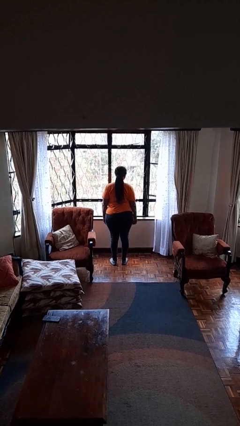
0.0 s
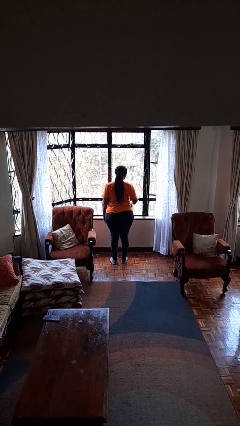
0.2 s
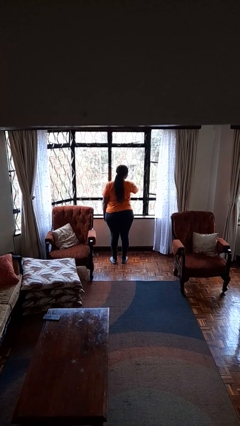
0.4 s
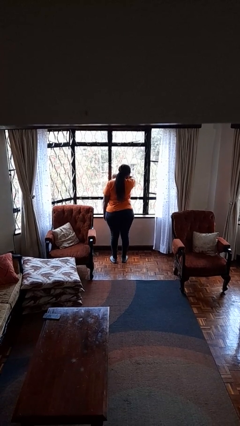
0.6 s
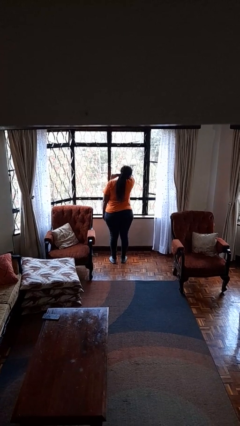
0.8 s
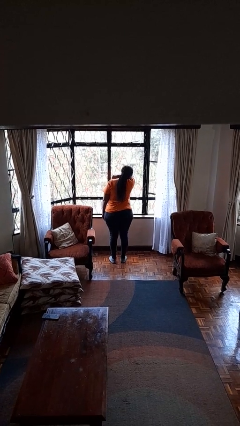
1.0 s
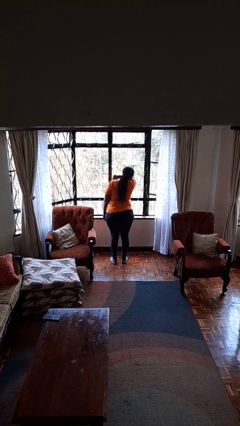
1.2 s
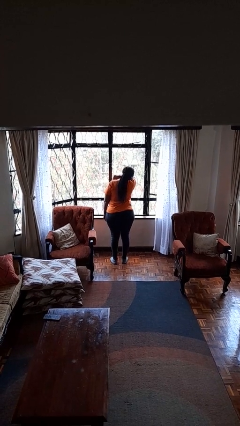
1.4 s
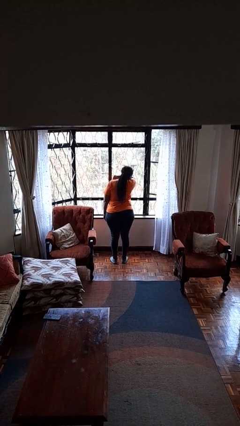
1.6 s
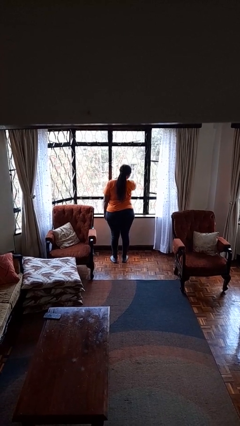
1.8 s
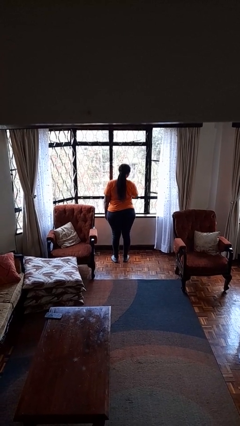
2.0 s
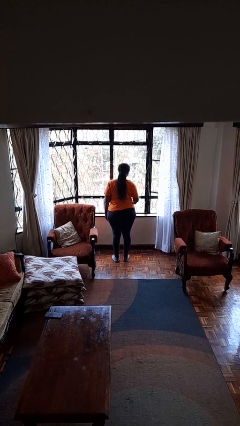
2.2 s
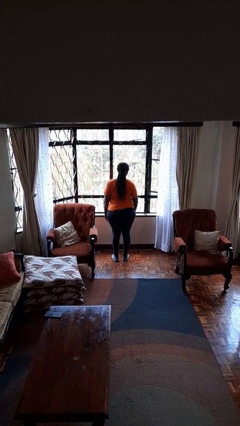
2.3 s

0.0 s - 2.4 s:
person sneezes into arm

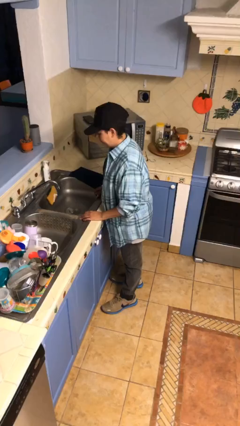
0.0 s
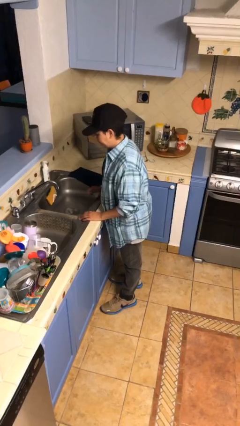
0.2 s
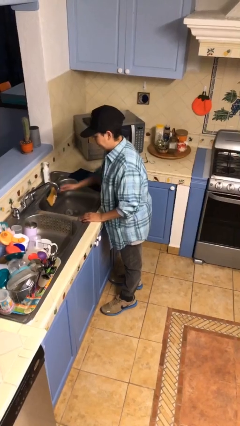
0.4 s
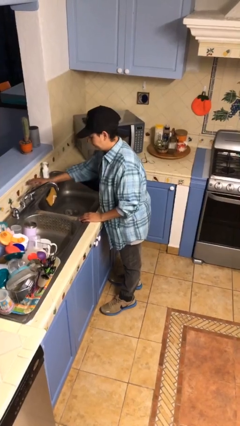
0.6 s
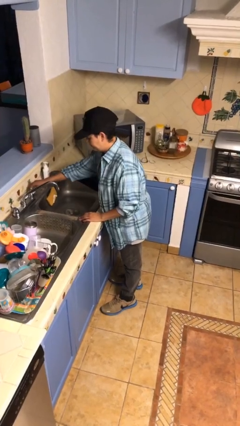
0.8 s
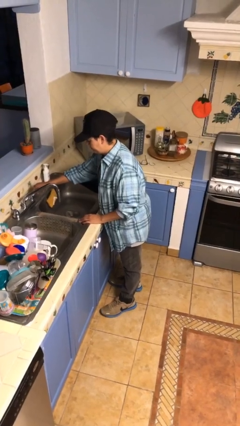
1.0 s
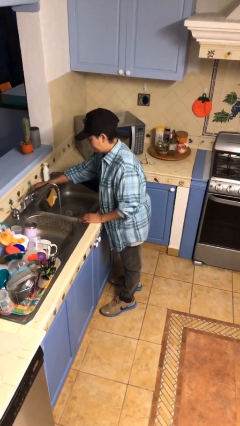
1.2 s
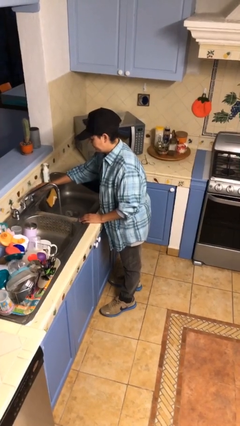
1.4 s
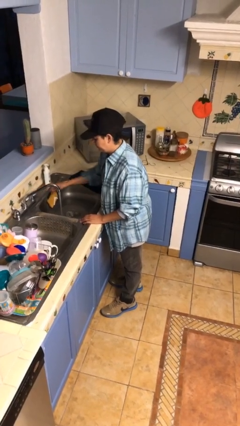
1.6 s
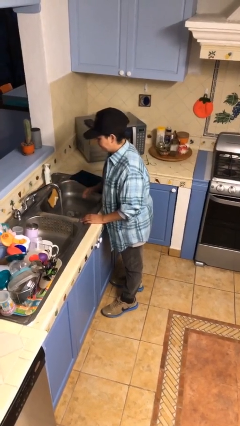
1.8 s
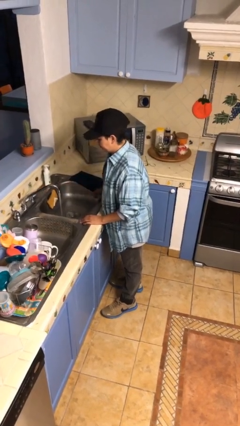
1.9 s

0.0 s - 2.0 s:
person turns on faucet

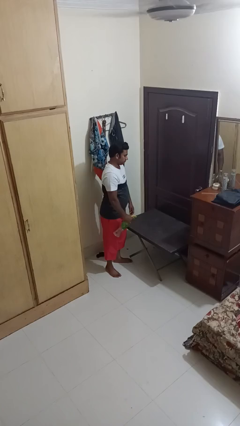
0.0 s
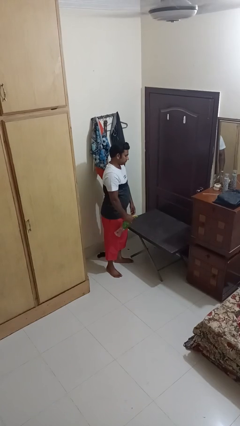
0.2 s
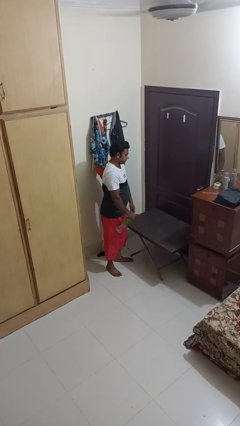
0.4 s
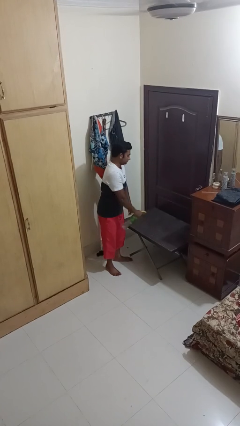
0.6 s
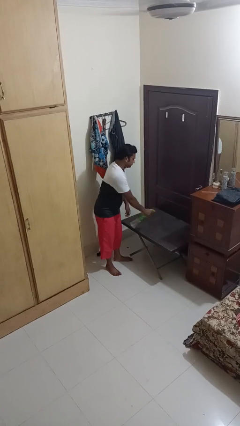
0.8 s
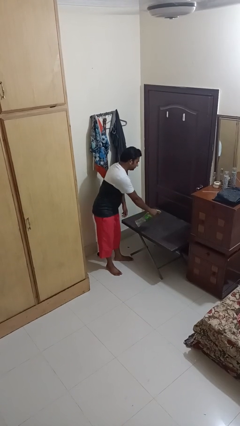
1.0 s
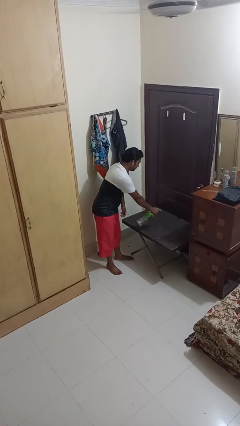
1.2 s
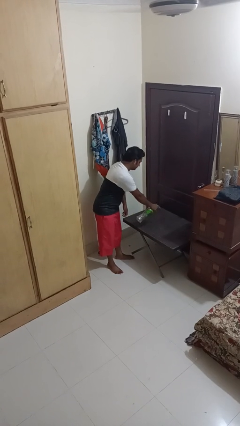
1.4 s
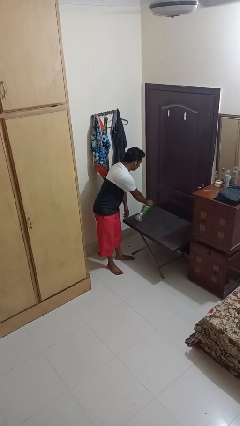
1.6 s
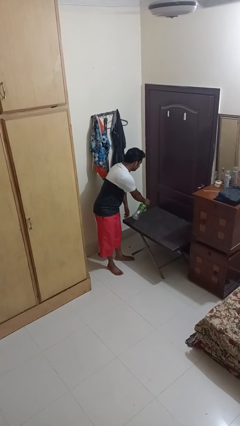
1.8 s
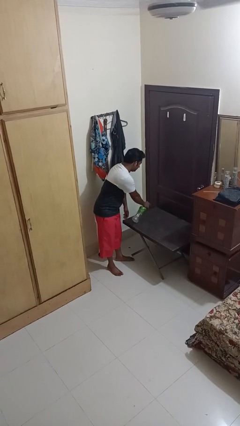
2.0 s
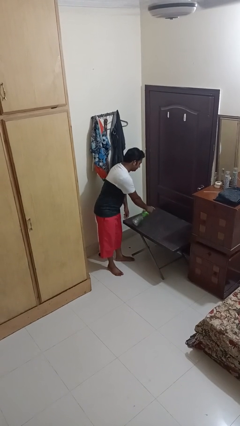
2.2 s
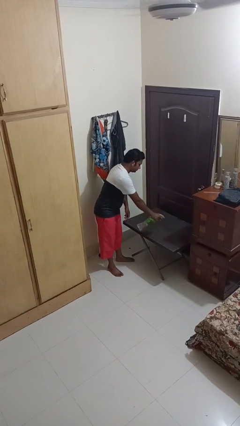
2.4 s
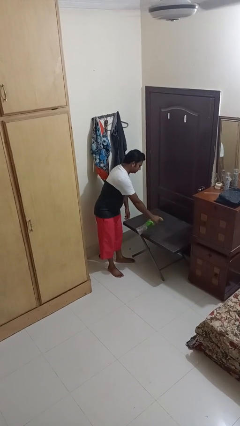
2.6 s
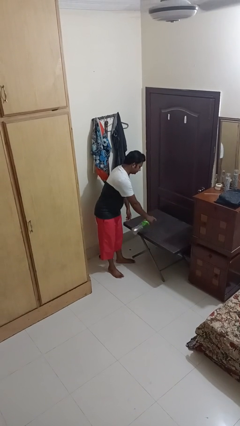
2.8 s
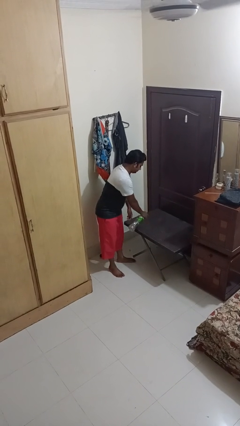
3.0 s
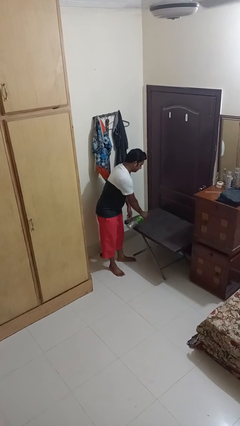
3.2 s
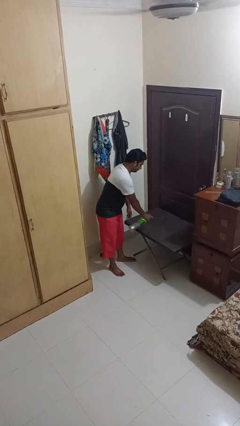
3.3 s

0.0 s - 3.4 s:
person sprays from bottle

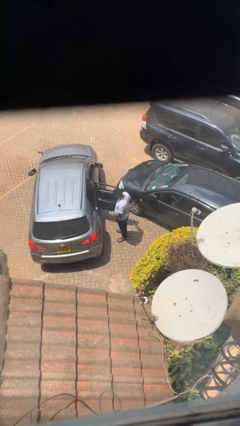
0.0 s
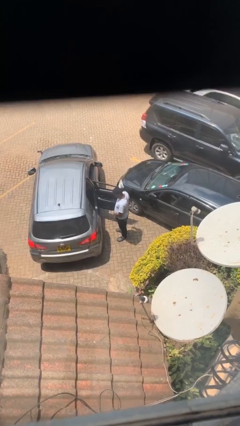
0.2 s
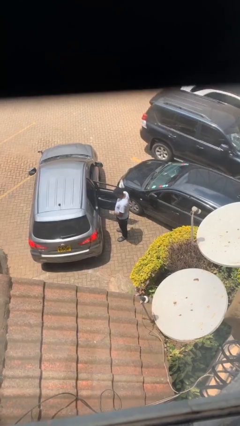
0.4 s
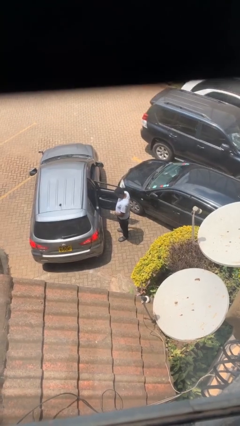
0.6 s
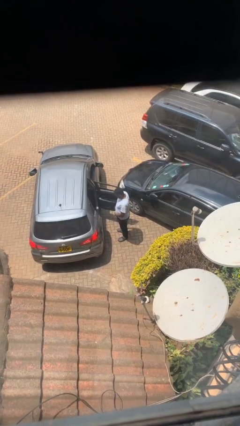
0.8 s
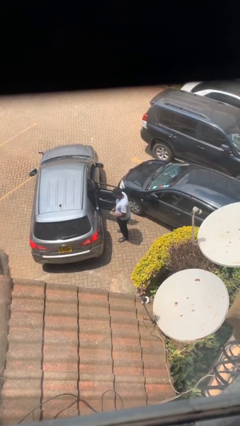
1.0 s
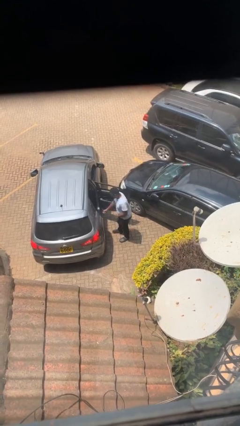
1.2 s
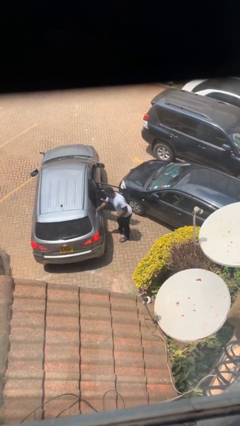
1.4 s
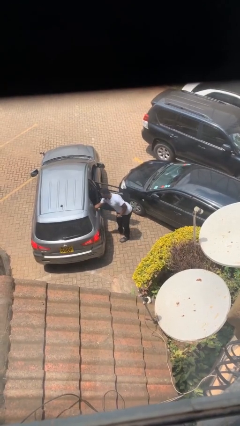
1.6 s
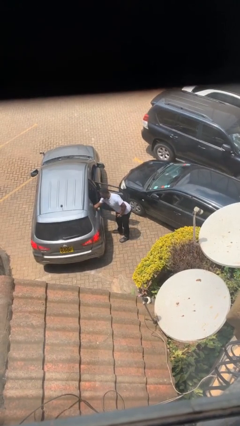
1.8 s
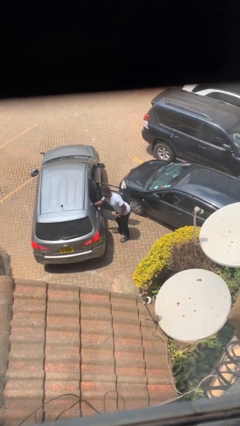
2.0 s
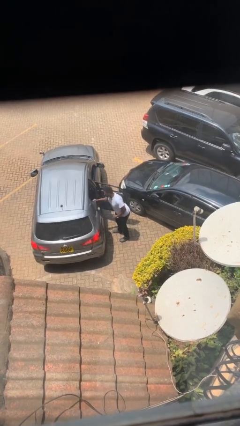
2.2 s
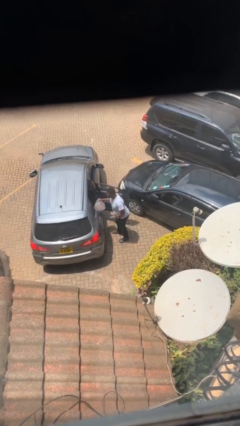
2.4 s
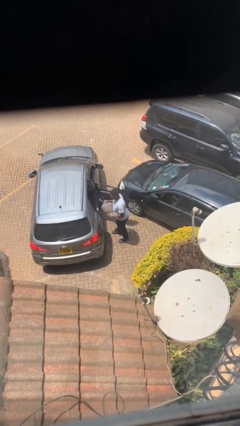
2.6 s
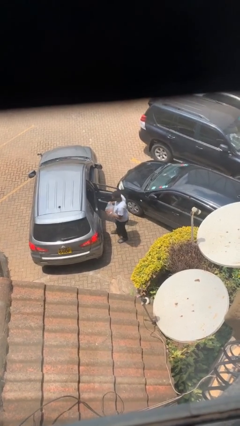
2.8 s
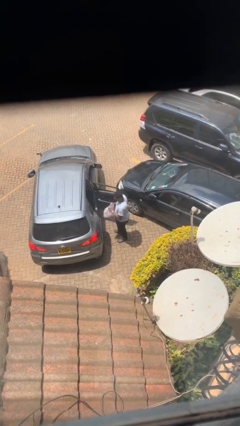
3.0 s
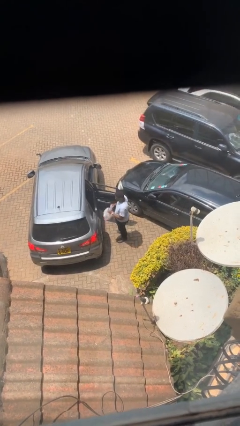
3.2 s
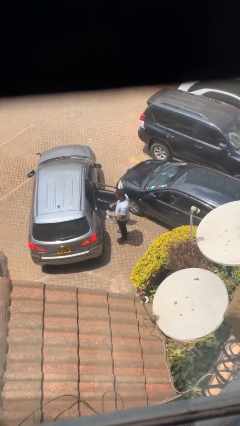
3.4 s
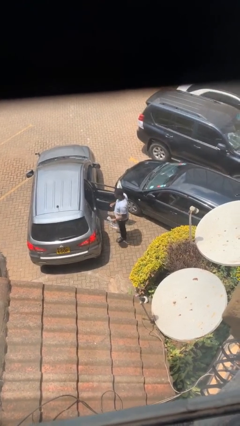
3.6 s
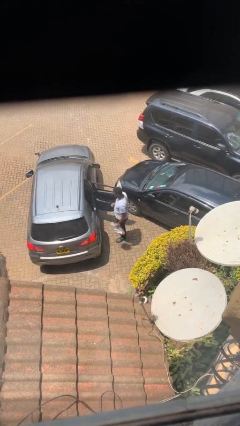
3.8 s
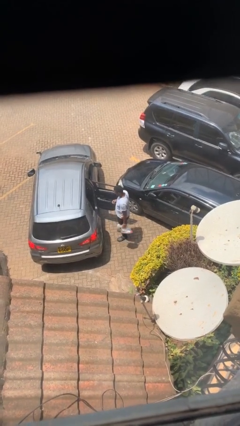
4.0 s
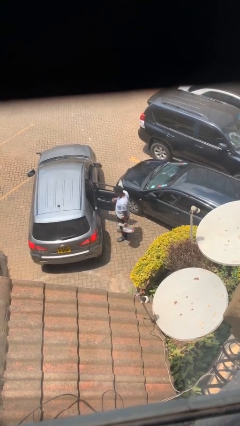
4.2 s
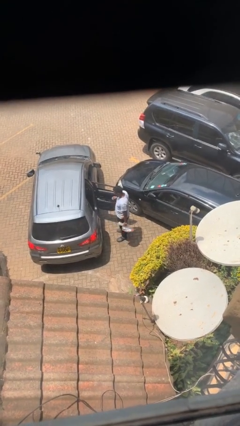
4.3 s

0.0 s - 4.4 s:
person unloads car

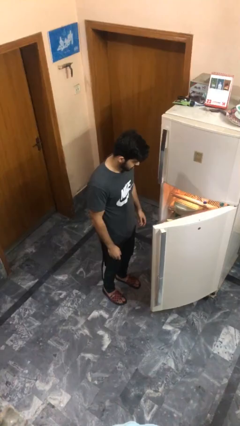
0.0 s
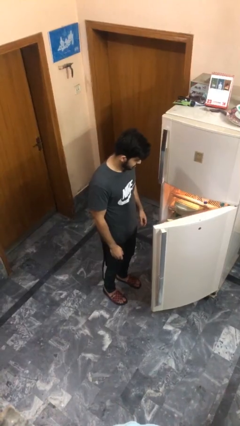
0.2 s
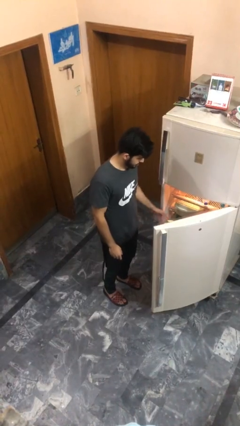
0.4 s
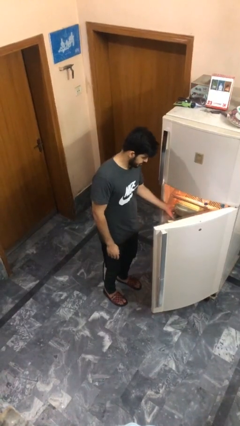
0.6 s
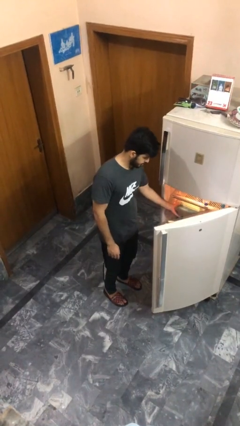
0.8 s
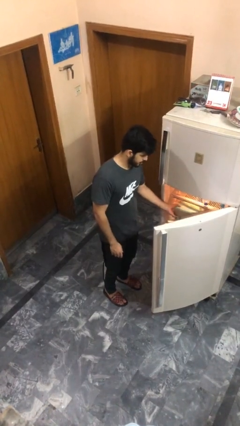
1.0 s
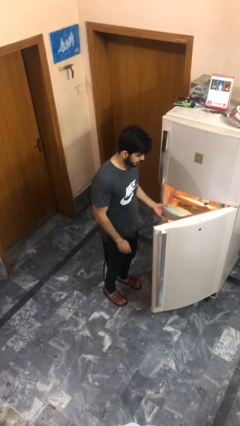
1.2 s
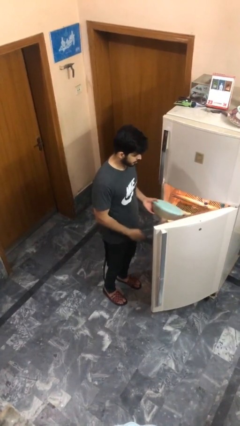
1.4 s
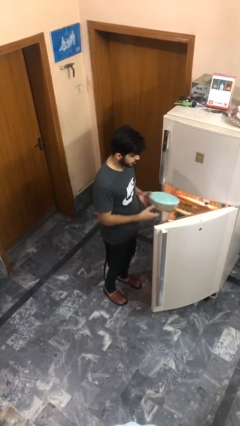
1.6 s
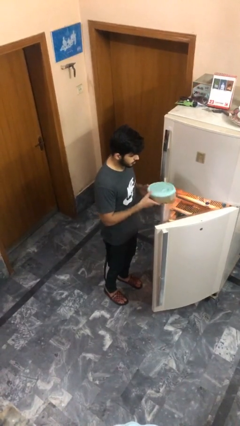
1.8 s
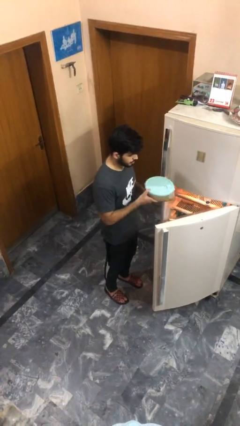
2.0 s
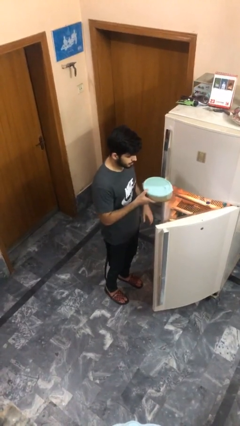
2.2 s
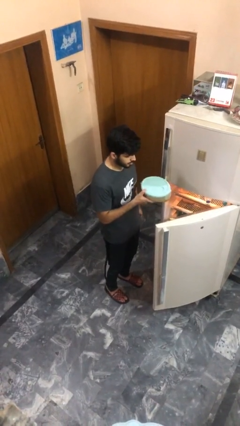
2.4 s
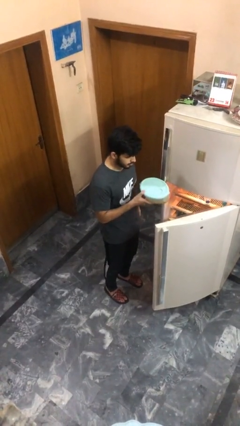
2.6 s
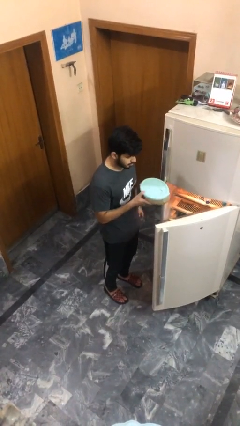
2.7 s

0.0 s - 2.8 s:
person picks up object from cabinet

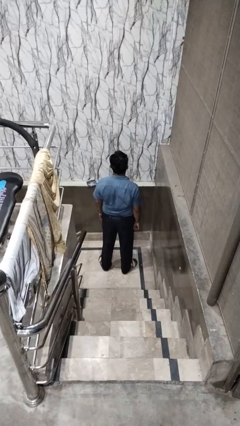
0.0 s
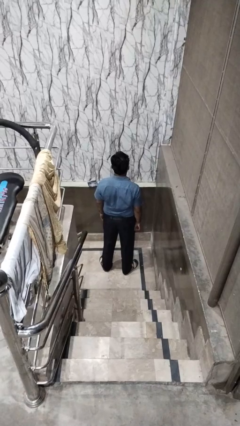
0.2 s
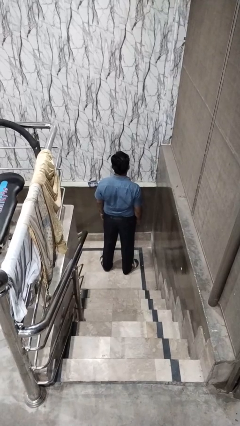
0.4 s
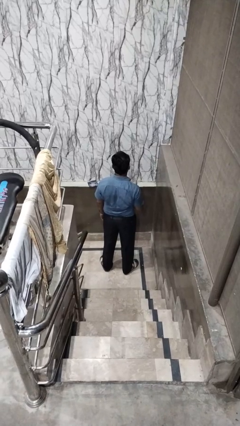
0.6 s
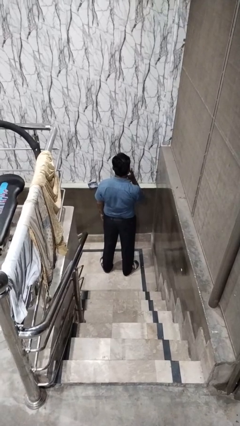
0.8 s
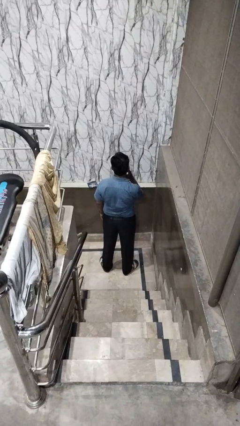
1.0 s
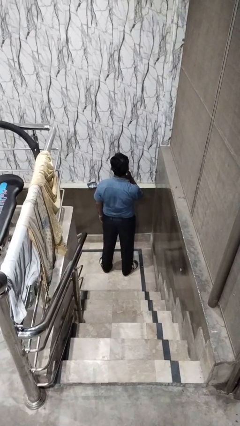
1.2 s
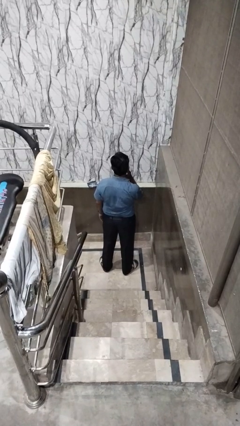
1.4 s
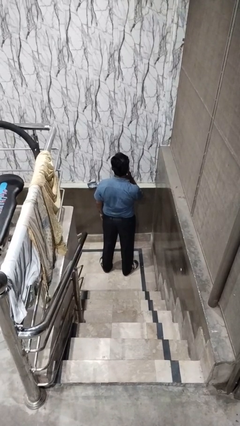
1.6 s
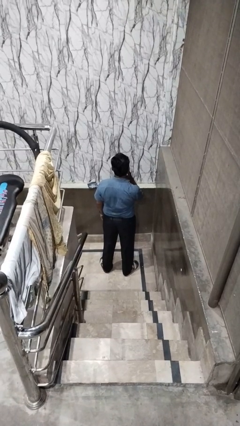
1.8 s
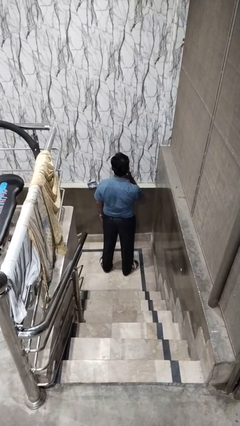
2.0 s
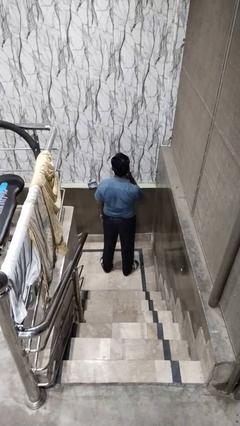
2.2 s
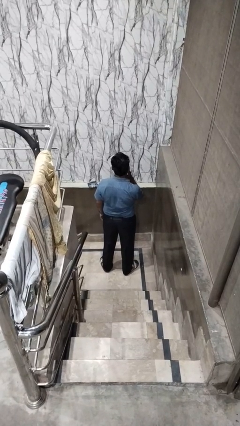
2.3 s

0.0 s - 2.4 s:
person strokes chin

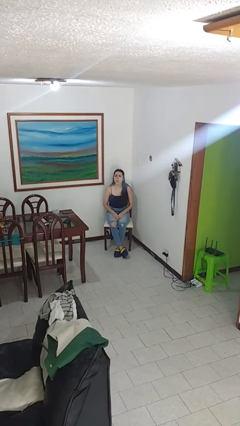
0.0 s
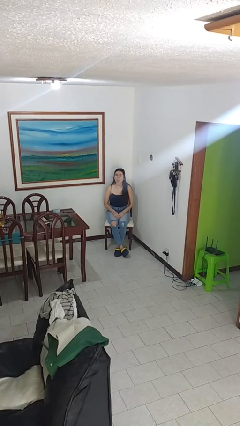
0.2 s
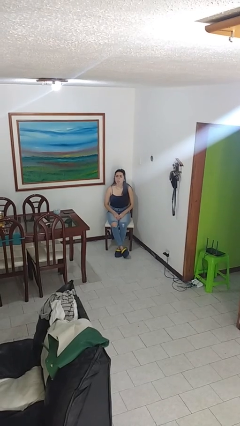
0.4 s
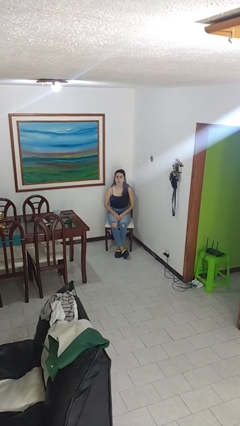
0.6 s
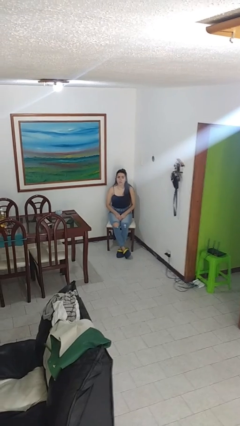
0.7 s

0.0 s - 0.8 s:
person sticks out tongue
